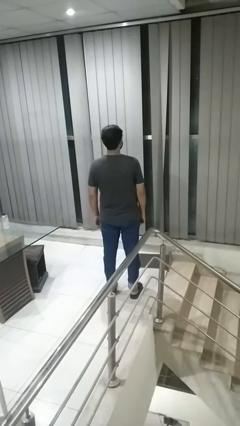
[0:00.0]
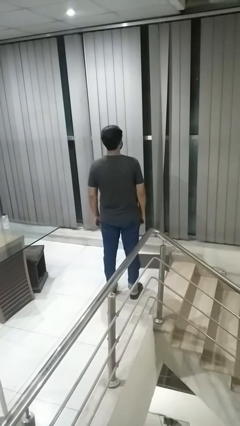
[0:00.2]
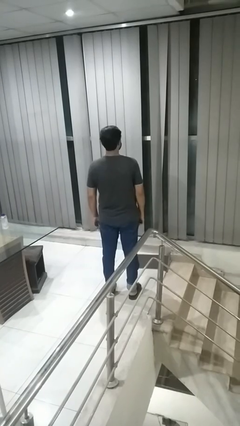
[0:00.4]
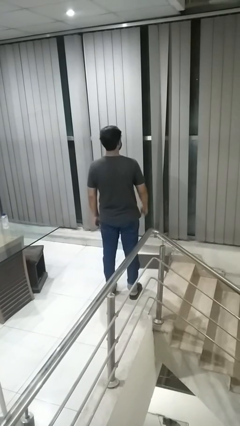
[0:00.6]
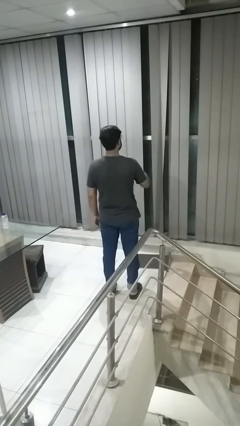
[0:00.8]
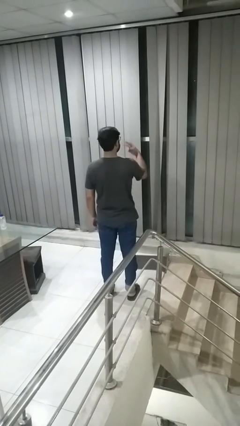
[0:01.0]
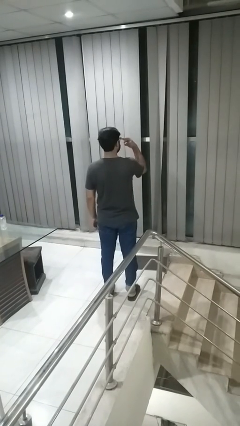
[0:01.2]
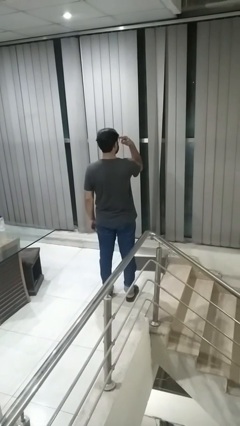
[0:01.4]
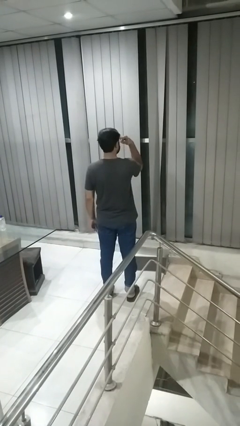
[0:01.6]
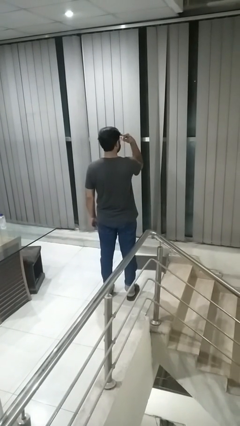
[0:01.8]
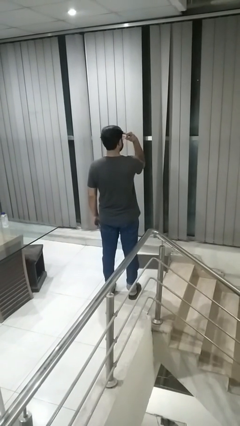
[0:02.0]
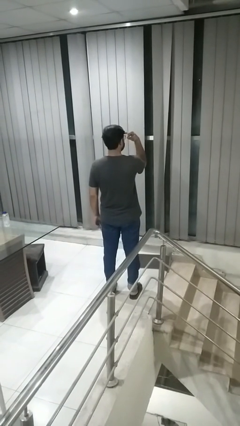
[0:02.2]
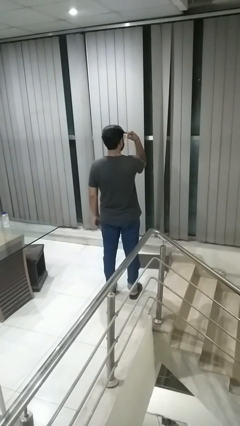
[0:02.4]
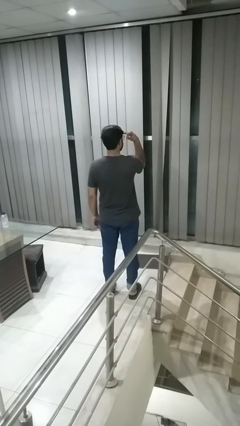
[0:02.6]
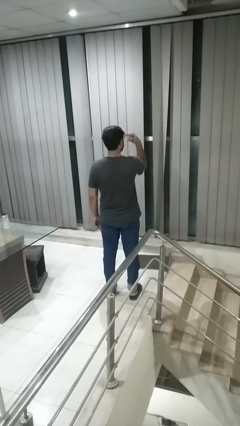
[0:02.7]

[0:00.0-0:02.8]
person gestures watch closely

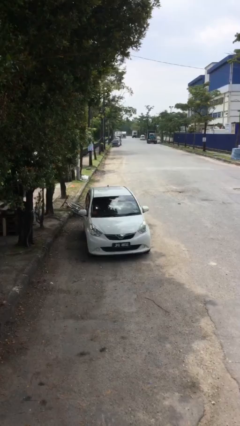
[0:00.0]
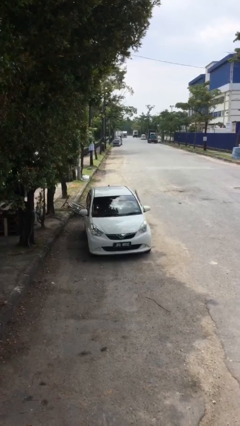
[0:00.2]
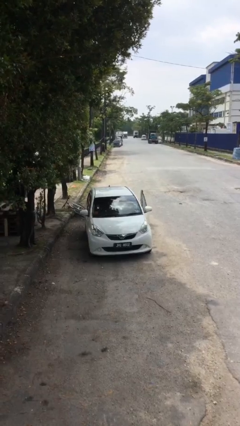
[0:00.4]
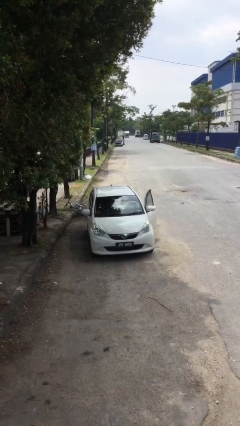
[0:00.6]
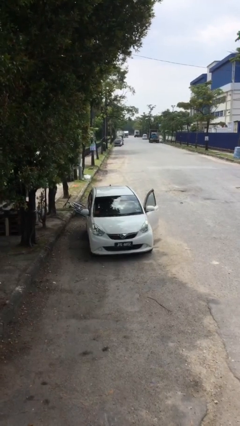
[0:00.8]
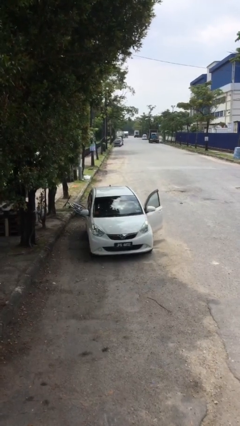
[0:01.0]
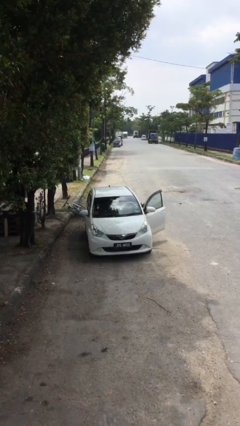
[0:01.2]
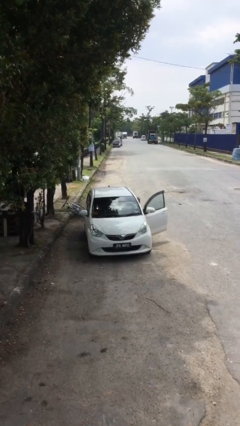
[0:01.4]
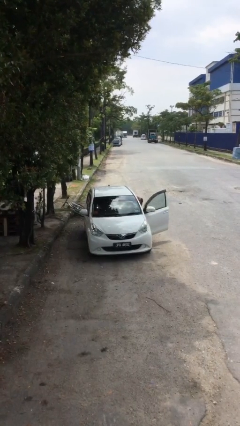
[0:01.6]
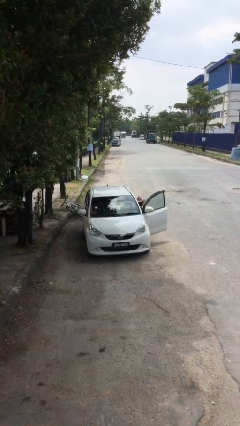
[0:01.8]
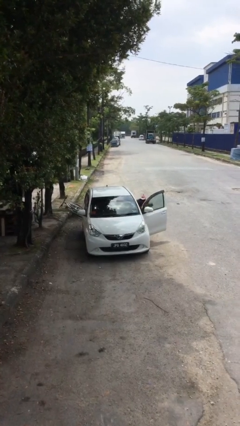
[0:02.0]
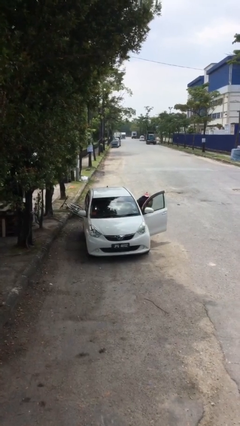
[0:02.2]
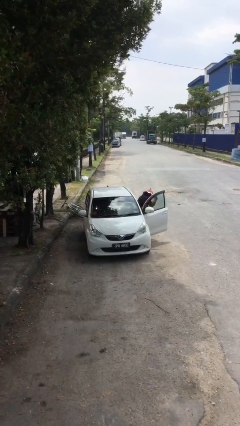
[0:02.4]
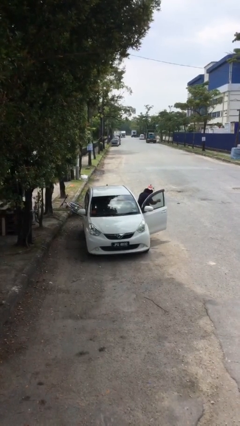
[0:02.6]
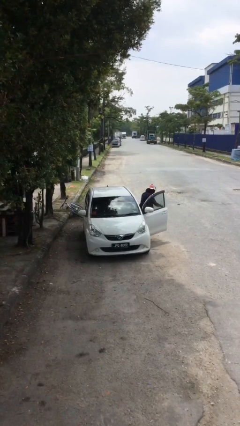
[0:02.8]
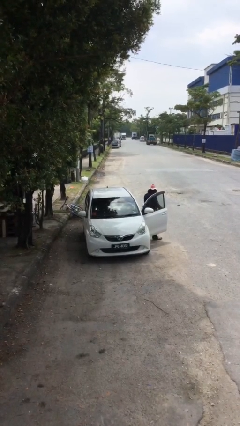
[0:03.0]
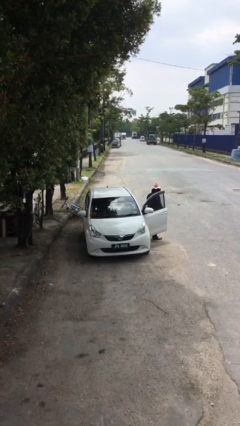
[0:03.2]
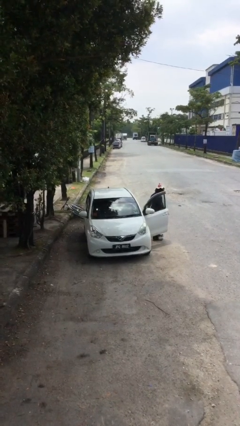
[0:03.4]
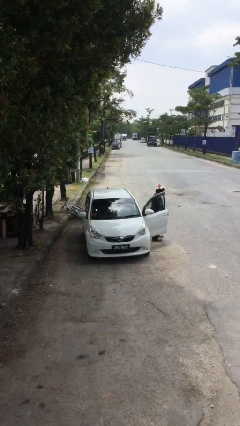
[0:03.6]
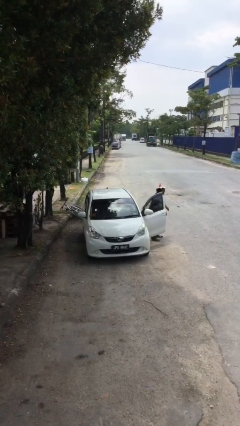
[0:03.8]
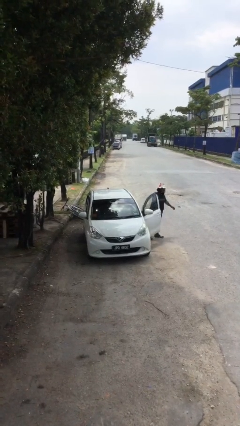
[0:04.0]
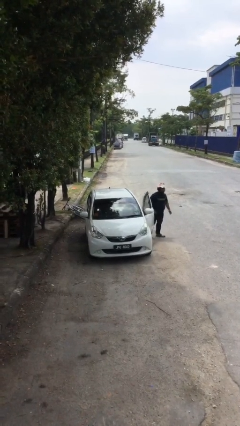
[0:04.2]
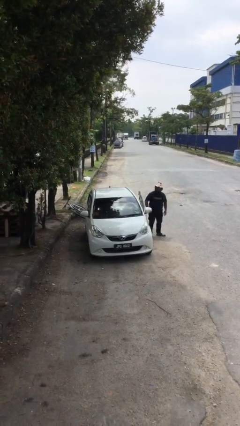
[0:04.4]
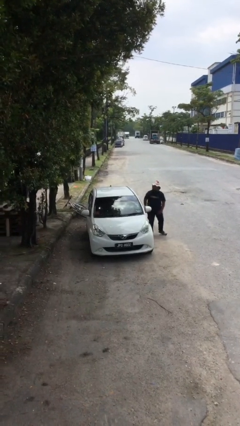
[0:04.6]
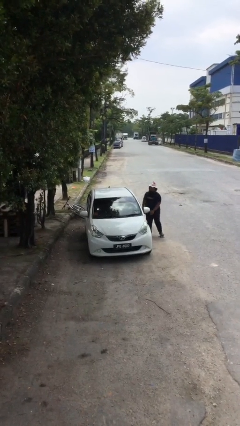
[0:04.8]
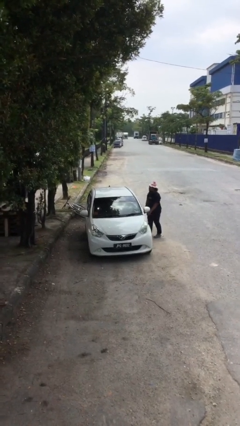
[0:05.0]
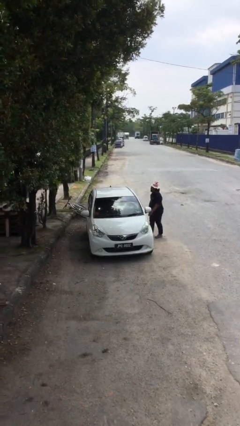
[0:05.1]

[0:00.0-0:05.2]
car drops off person

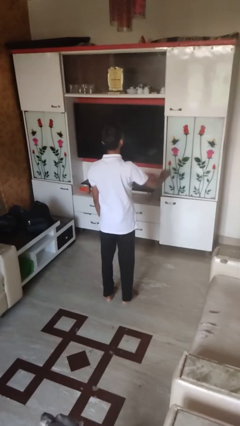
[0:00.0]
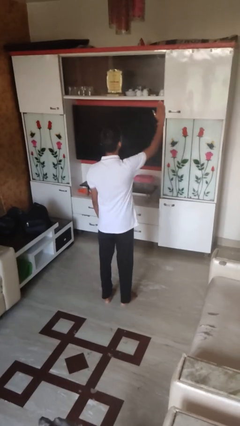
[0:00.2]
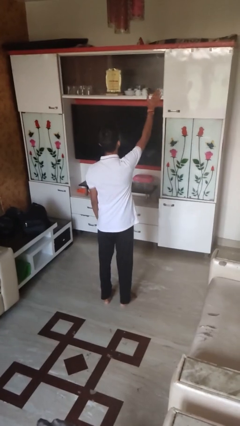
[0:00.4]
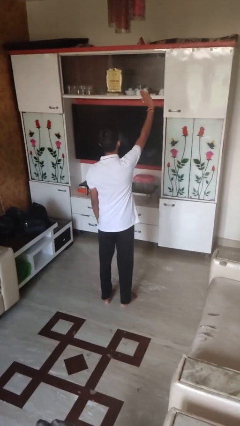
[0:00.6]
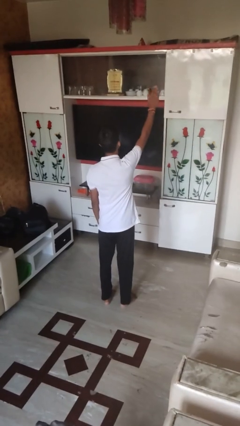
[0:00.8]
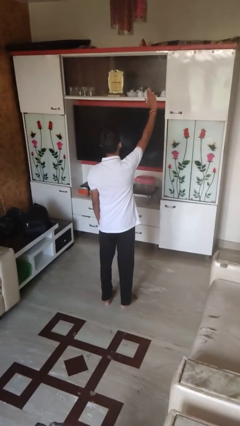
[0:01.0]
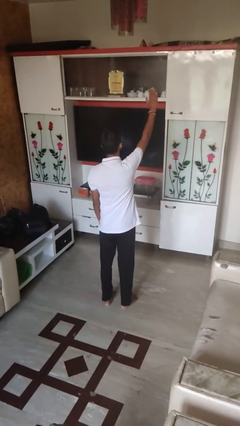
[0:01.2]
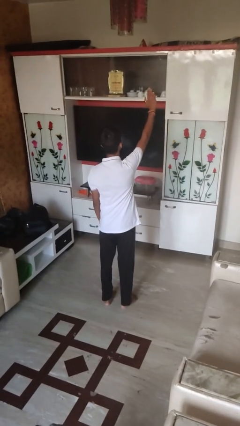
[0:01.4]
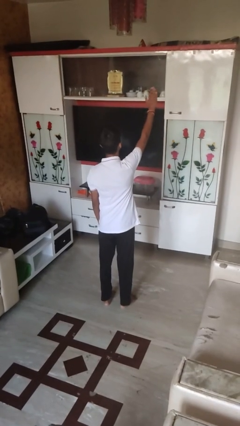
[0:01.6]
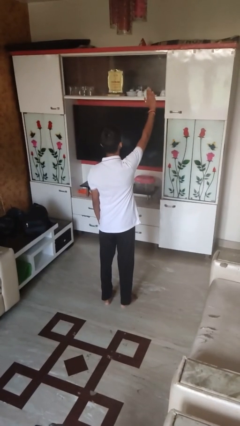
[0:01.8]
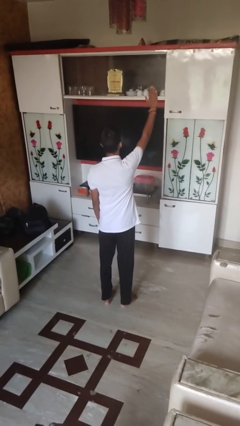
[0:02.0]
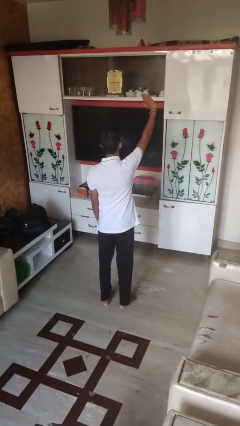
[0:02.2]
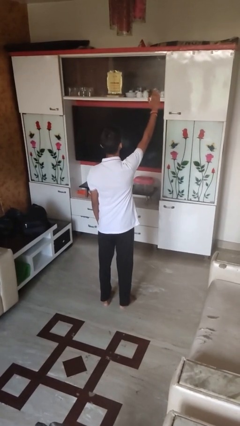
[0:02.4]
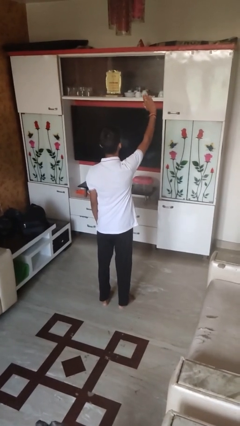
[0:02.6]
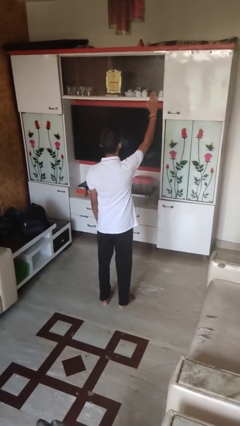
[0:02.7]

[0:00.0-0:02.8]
person waves at person

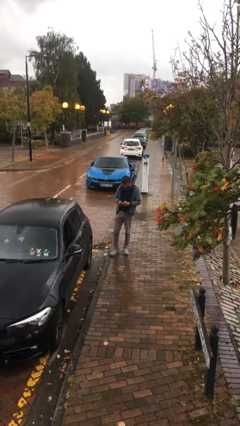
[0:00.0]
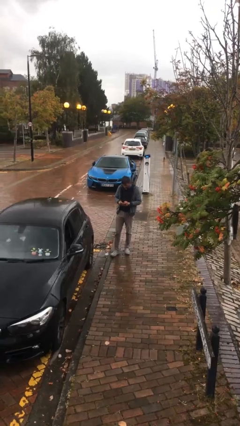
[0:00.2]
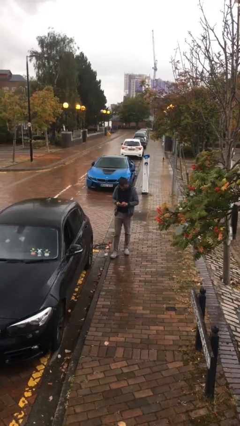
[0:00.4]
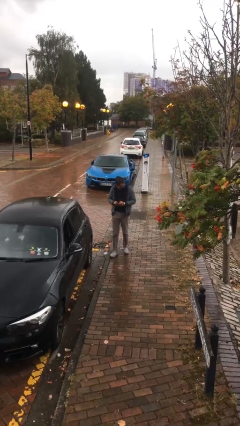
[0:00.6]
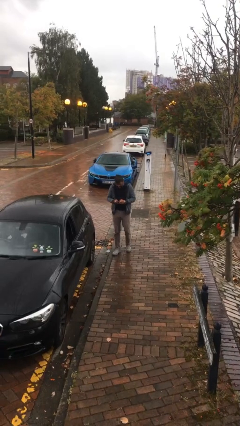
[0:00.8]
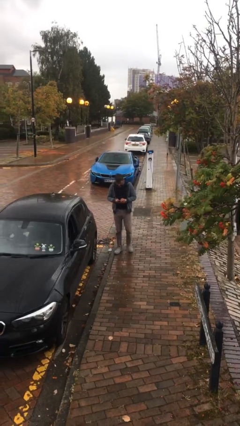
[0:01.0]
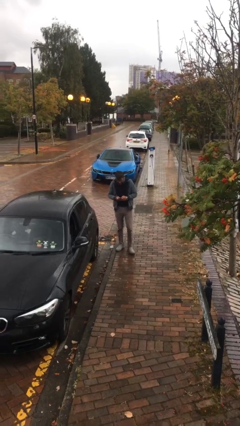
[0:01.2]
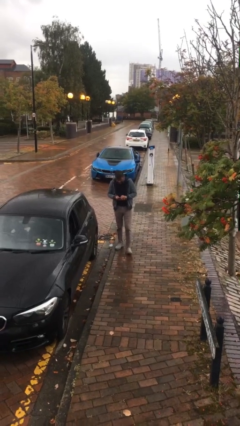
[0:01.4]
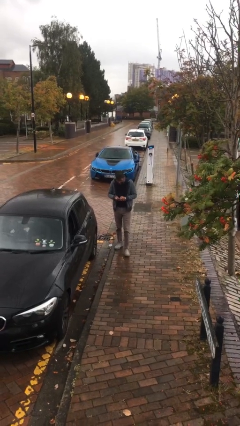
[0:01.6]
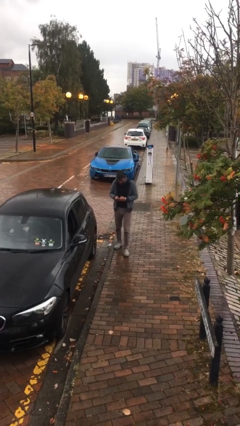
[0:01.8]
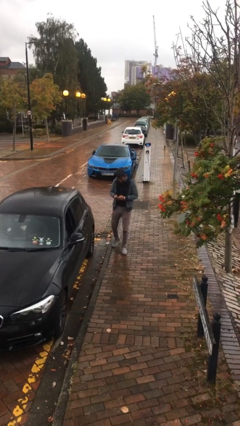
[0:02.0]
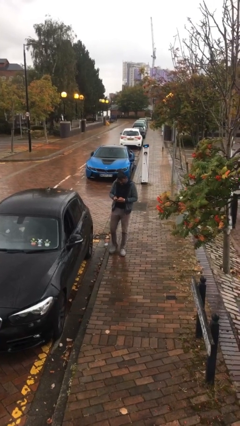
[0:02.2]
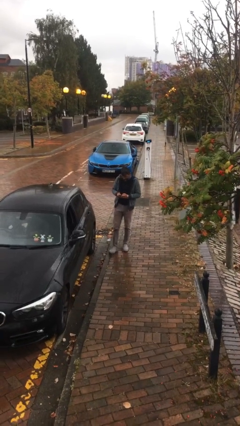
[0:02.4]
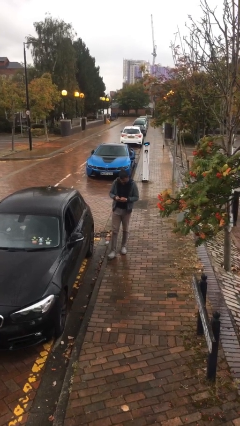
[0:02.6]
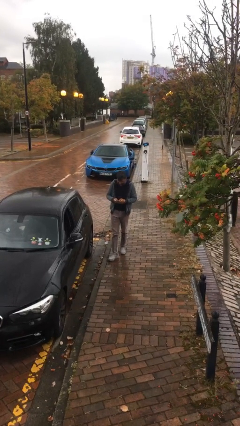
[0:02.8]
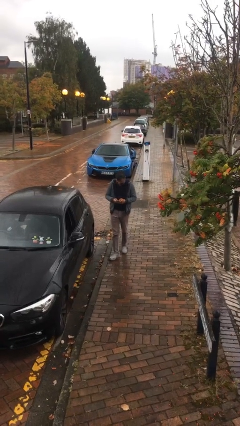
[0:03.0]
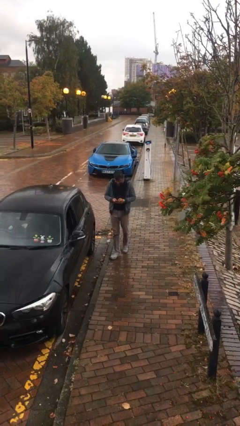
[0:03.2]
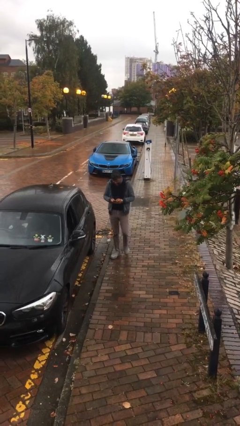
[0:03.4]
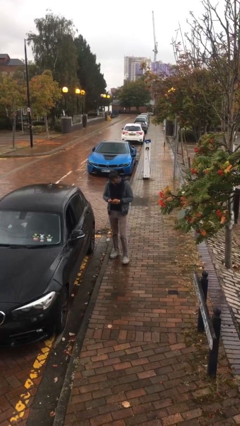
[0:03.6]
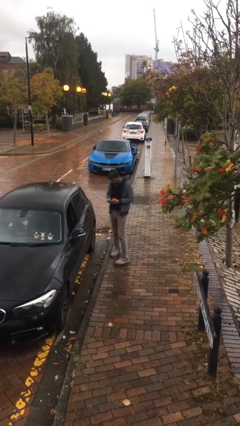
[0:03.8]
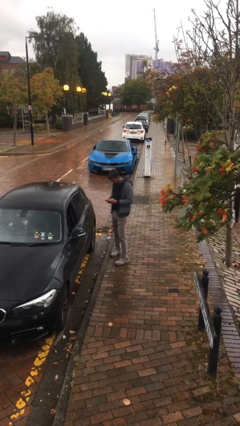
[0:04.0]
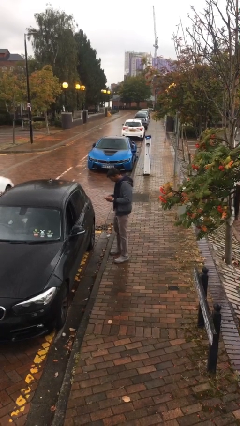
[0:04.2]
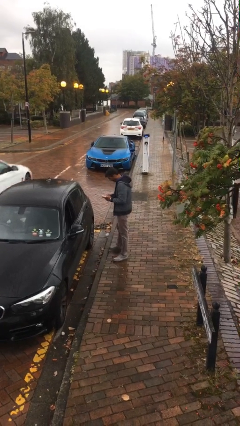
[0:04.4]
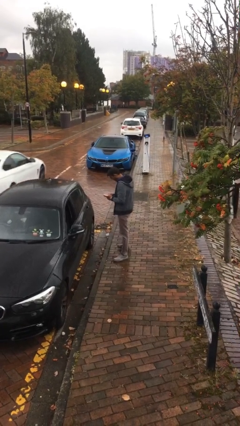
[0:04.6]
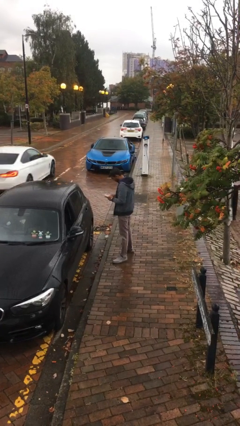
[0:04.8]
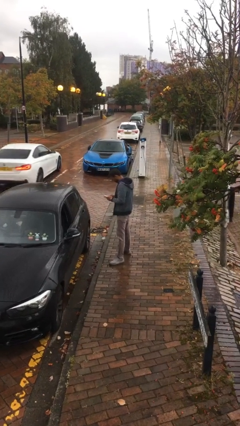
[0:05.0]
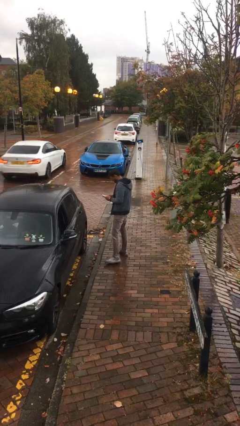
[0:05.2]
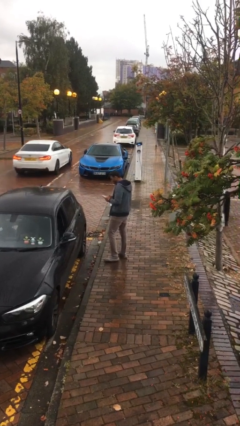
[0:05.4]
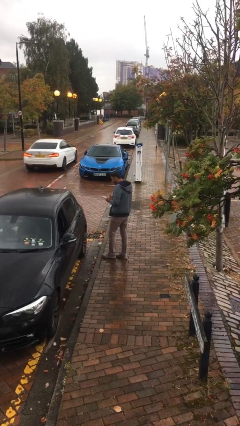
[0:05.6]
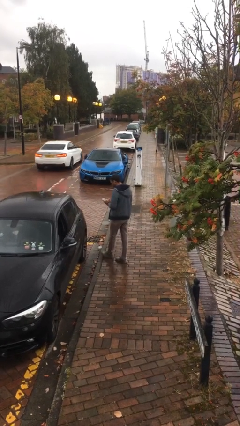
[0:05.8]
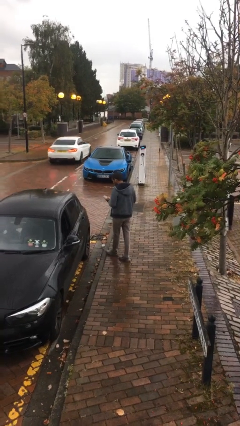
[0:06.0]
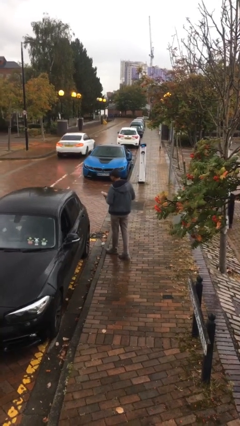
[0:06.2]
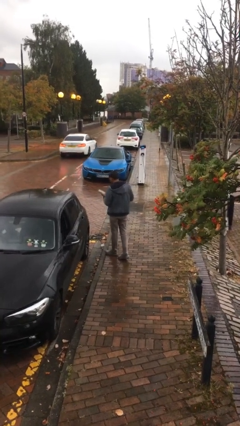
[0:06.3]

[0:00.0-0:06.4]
person texts on phone

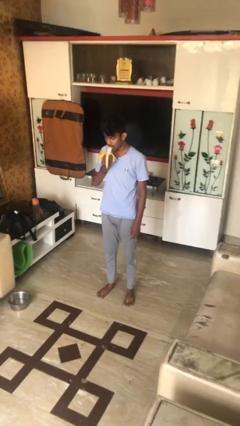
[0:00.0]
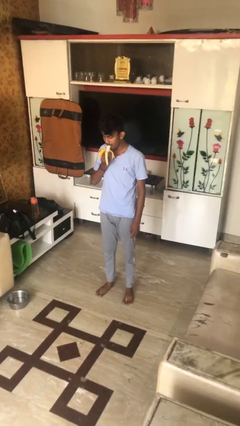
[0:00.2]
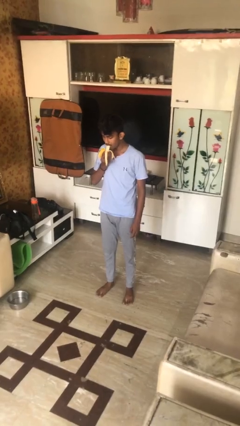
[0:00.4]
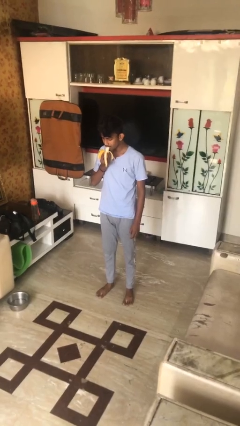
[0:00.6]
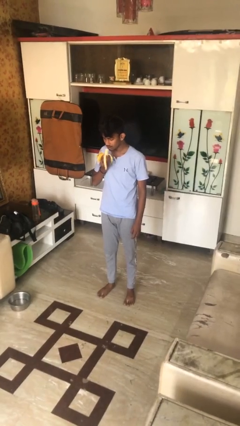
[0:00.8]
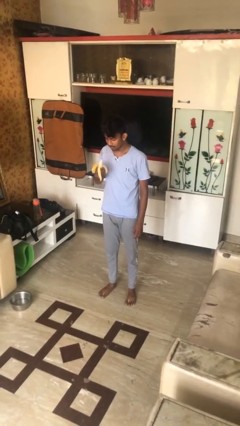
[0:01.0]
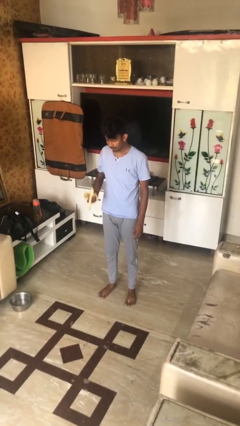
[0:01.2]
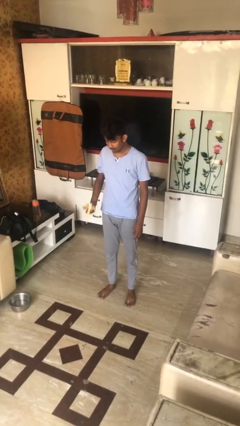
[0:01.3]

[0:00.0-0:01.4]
person eats banana
